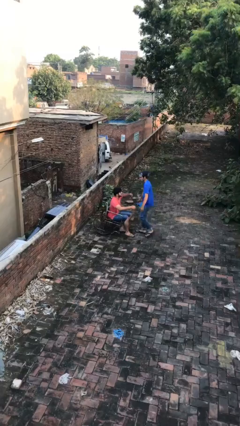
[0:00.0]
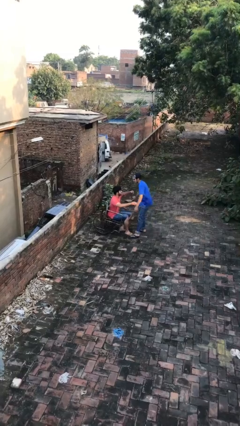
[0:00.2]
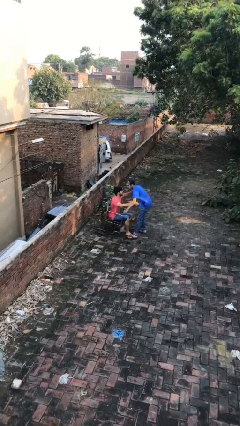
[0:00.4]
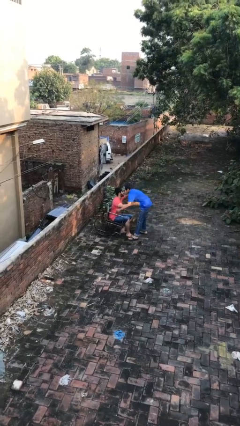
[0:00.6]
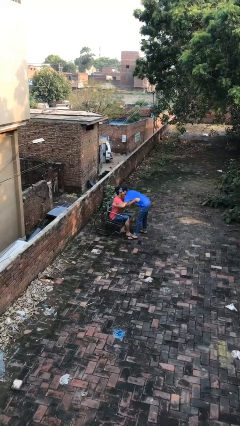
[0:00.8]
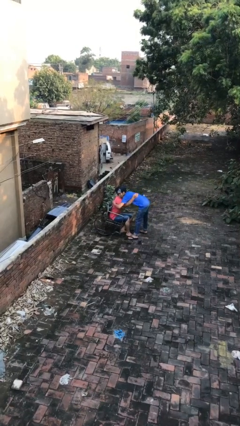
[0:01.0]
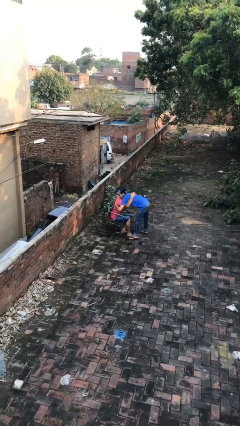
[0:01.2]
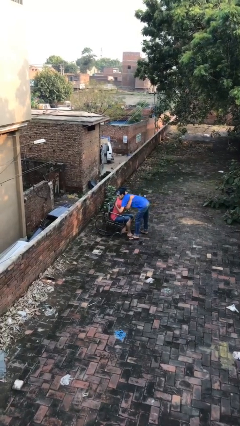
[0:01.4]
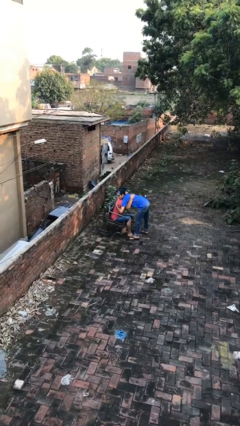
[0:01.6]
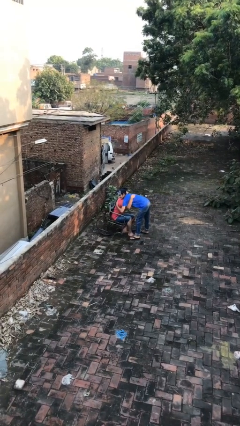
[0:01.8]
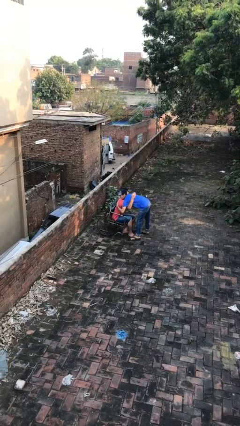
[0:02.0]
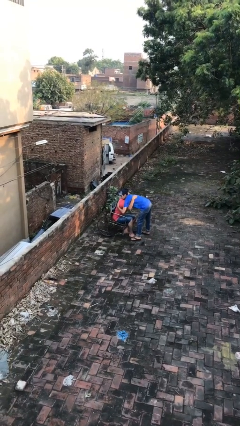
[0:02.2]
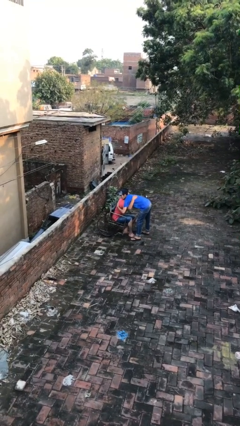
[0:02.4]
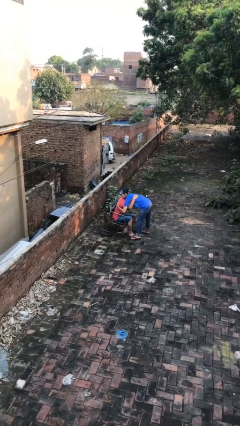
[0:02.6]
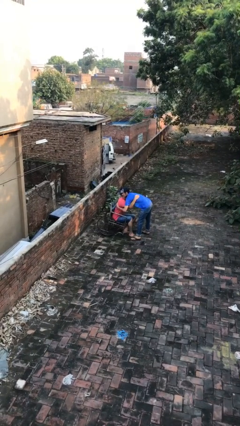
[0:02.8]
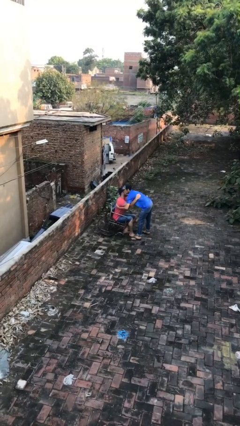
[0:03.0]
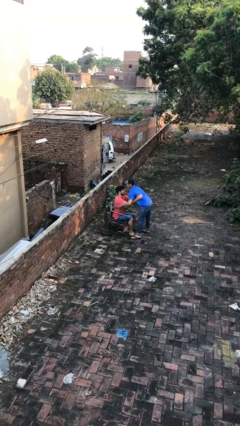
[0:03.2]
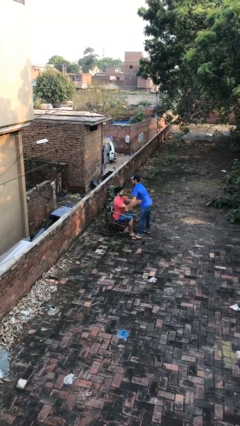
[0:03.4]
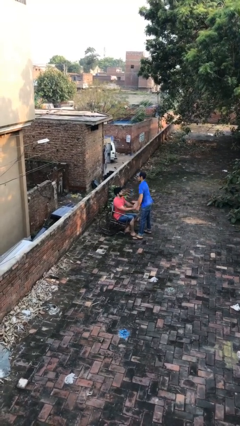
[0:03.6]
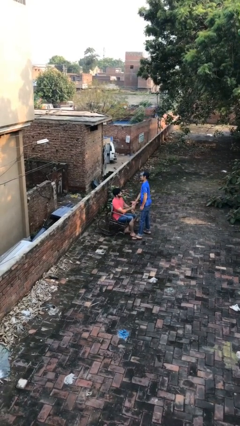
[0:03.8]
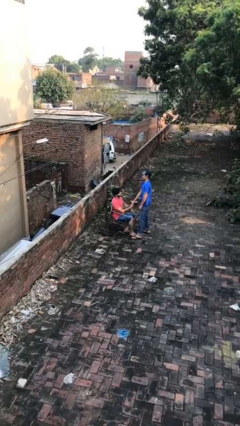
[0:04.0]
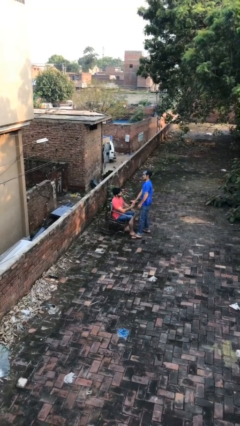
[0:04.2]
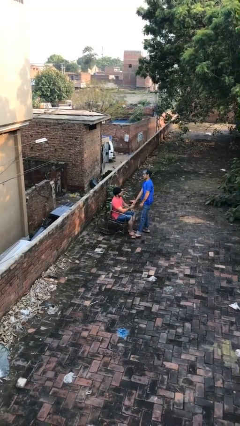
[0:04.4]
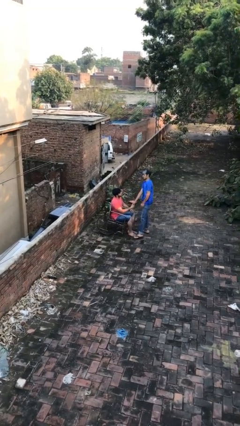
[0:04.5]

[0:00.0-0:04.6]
person embraces person

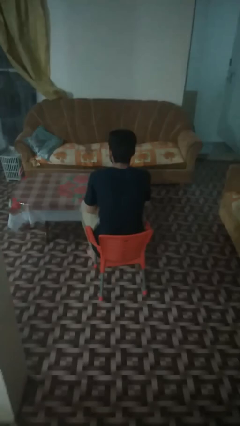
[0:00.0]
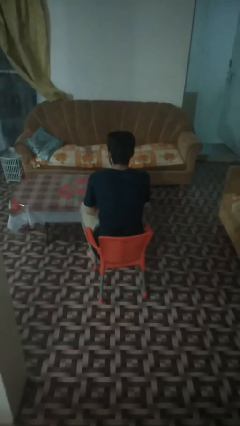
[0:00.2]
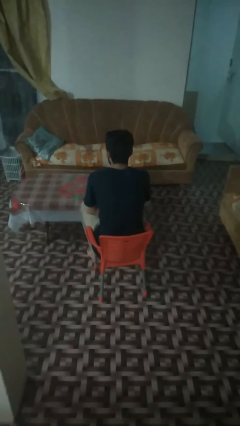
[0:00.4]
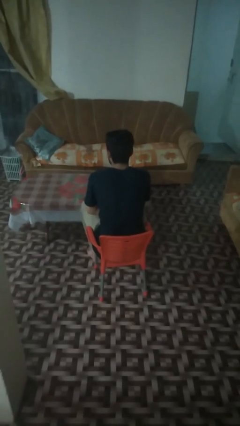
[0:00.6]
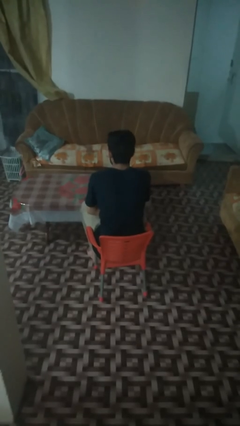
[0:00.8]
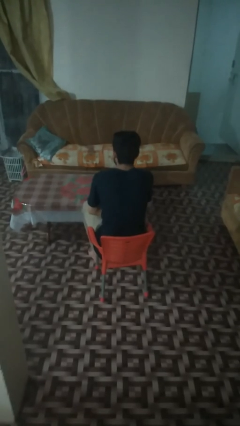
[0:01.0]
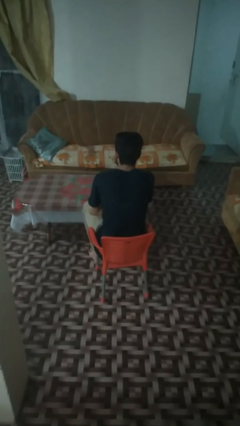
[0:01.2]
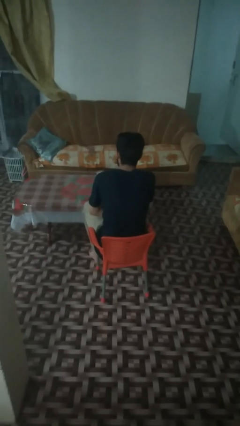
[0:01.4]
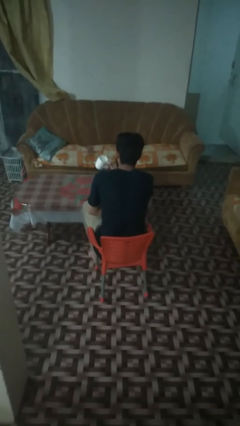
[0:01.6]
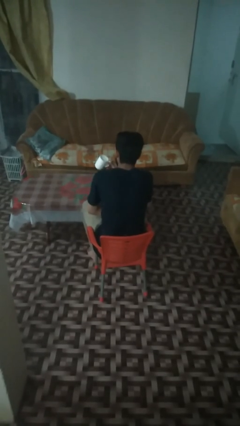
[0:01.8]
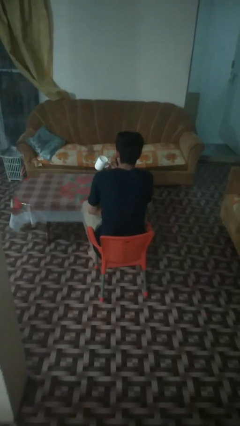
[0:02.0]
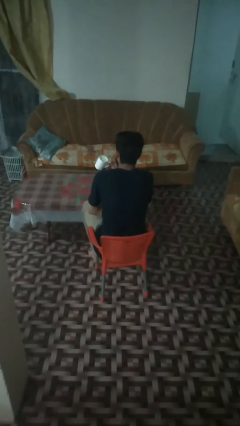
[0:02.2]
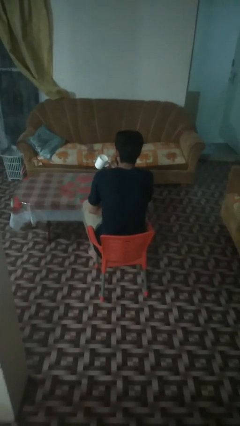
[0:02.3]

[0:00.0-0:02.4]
person picks up object from table

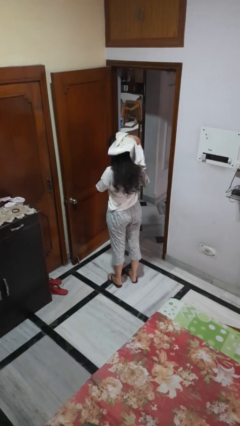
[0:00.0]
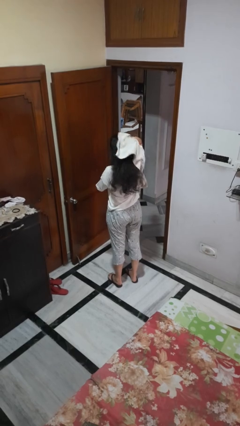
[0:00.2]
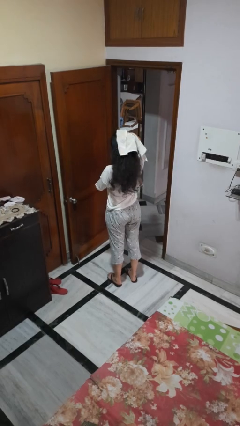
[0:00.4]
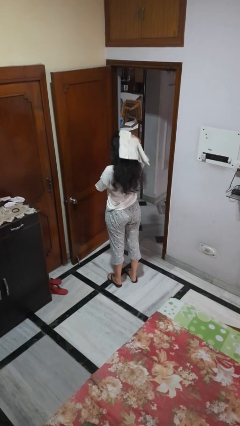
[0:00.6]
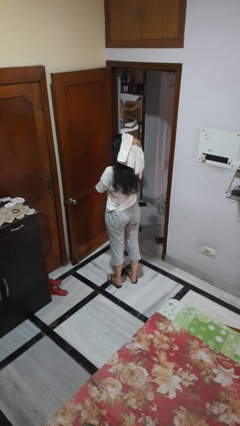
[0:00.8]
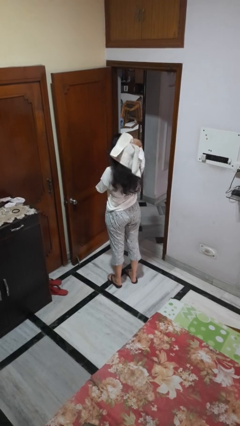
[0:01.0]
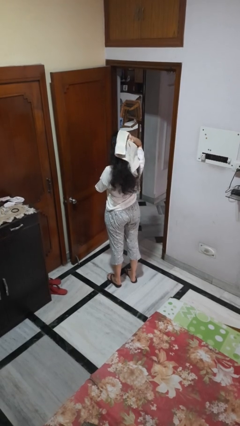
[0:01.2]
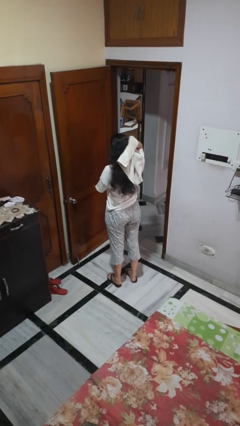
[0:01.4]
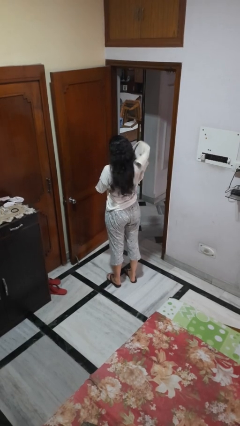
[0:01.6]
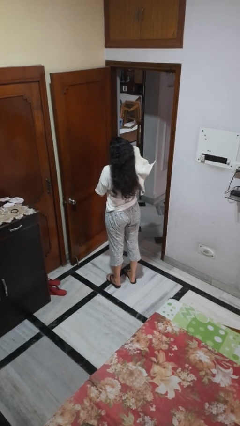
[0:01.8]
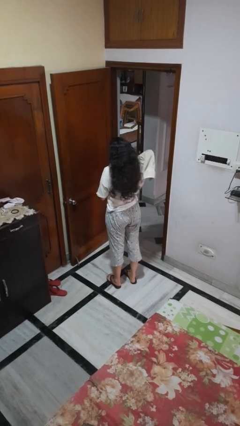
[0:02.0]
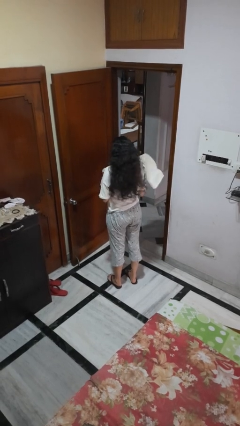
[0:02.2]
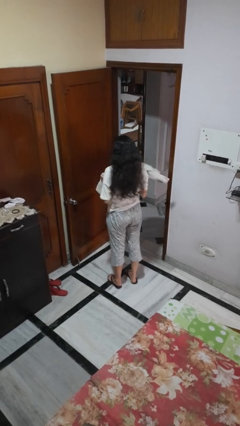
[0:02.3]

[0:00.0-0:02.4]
person dries hair with towel

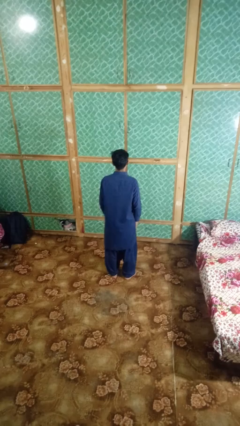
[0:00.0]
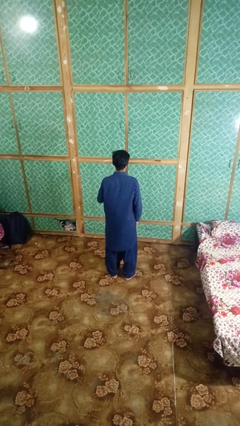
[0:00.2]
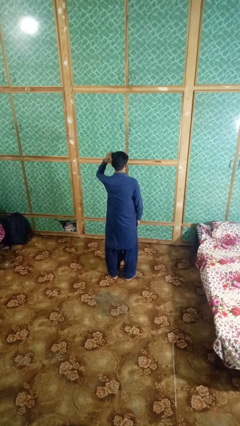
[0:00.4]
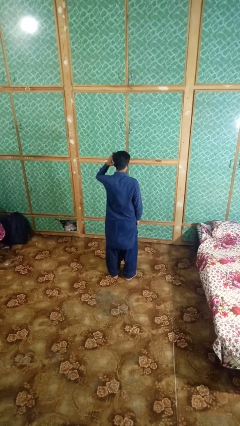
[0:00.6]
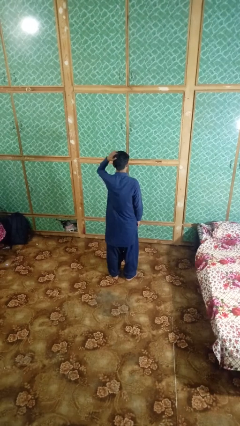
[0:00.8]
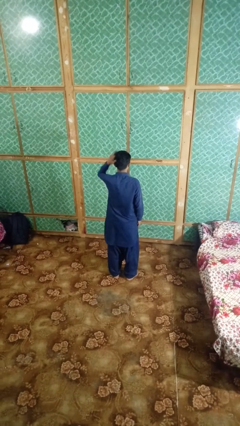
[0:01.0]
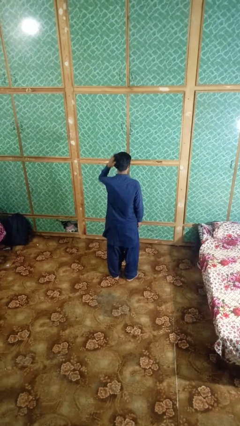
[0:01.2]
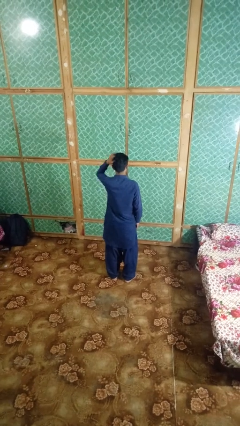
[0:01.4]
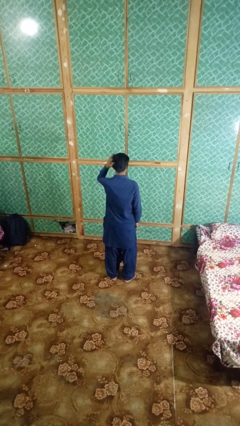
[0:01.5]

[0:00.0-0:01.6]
person strokes hair

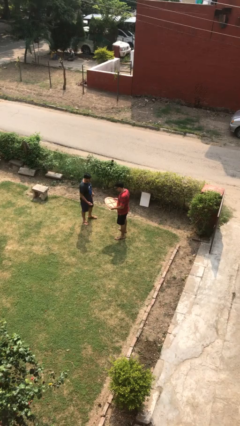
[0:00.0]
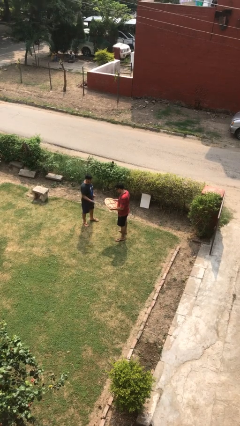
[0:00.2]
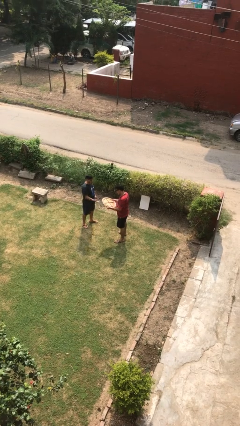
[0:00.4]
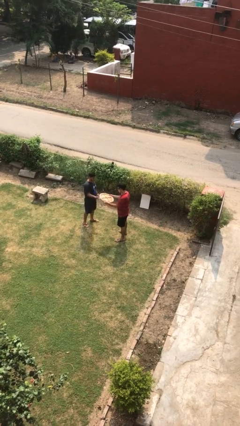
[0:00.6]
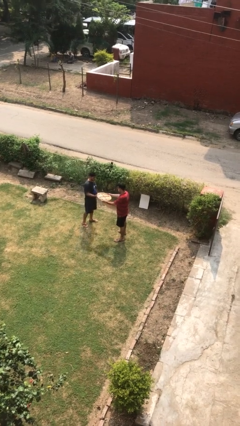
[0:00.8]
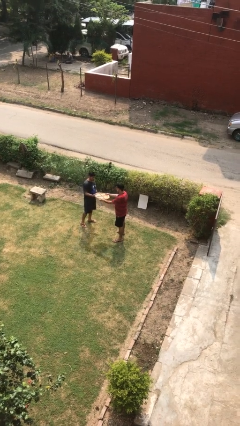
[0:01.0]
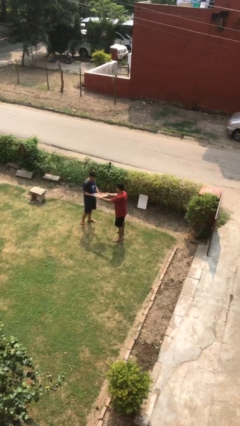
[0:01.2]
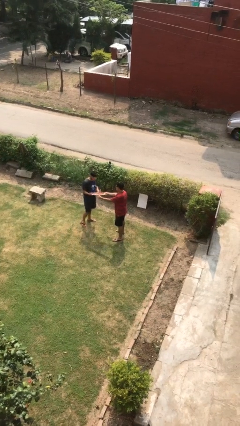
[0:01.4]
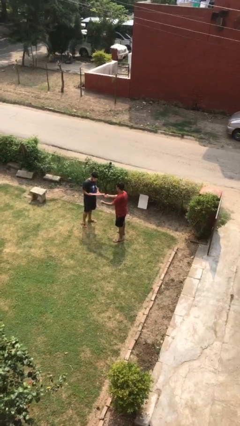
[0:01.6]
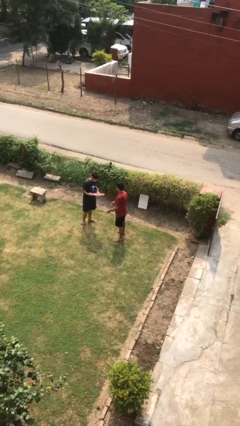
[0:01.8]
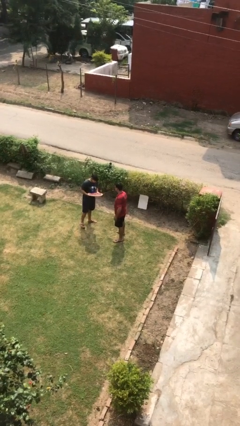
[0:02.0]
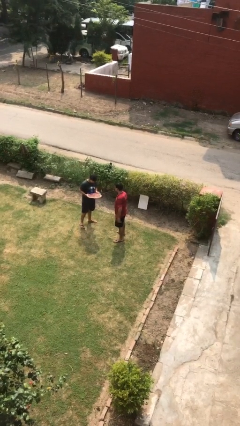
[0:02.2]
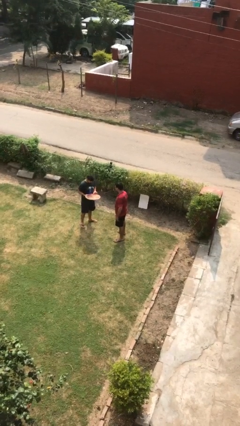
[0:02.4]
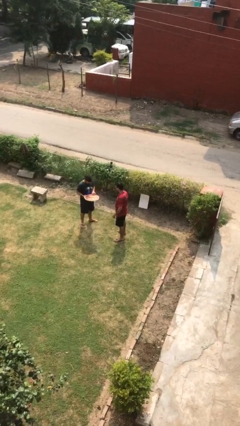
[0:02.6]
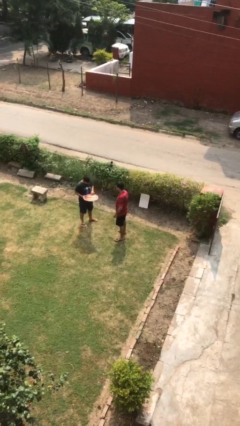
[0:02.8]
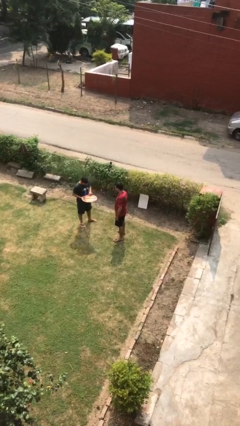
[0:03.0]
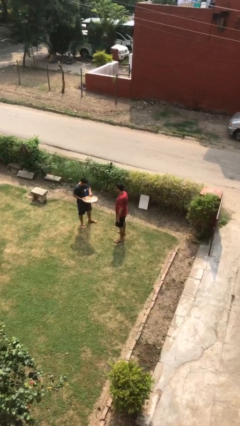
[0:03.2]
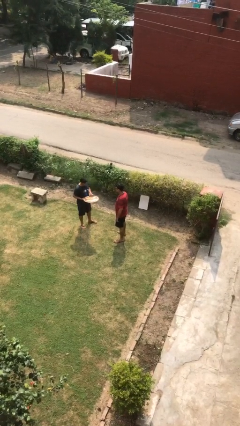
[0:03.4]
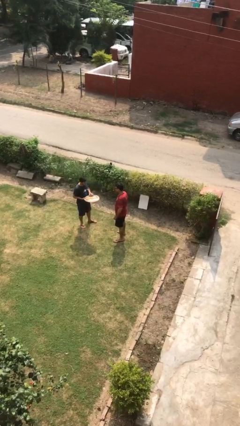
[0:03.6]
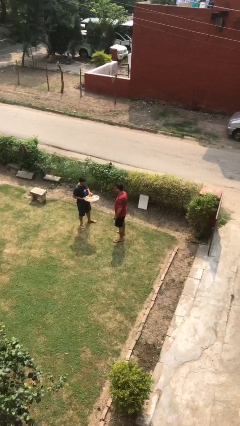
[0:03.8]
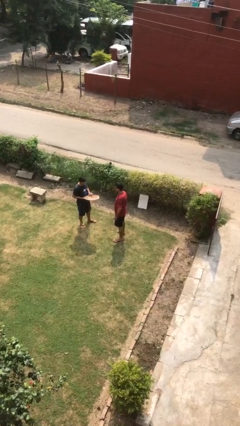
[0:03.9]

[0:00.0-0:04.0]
person transfers object to person

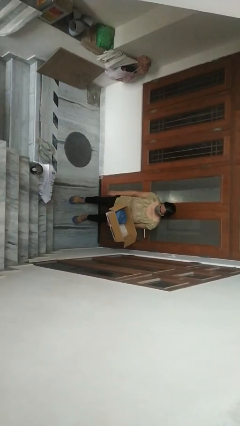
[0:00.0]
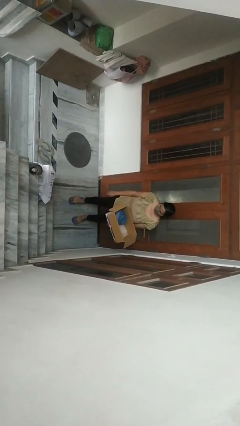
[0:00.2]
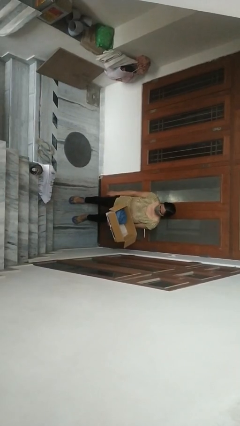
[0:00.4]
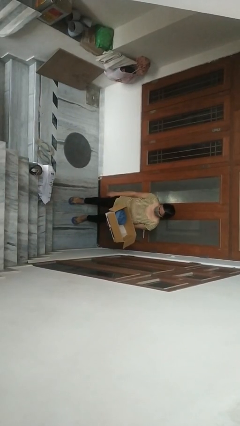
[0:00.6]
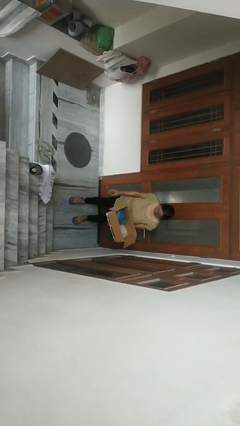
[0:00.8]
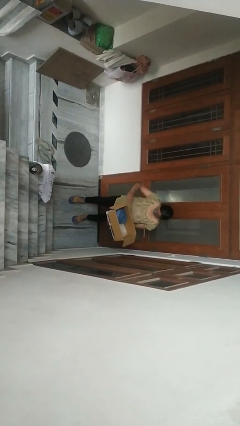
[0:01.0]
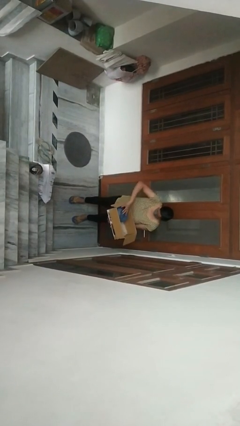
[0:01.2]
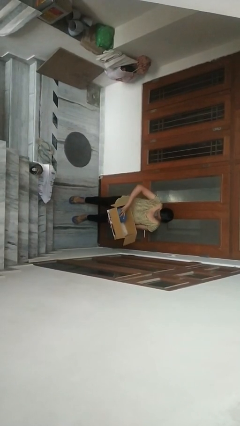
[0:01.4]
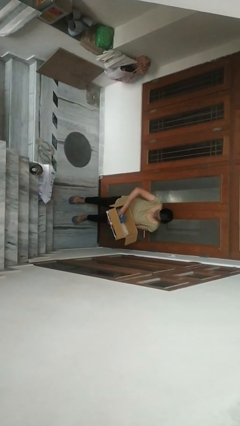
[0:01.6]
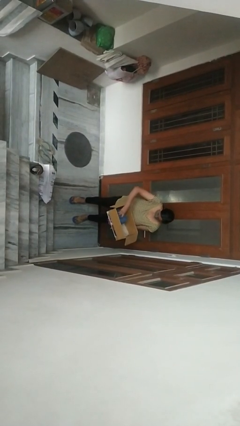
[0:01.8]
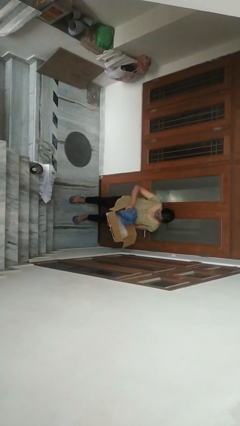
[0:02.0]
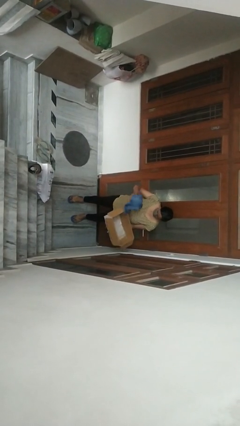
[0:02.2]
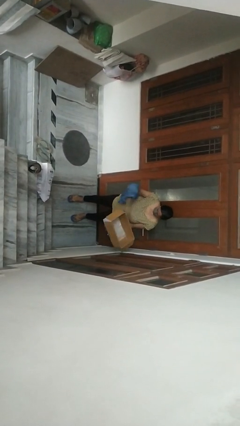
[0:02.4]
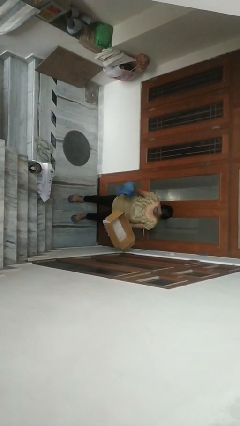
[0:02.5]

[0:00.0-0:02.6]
person takes object from box
